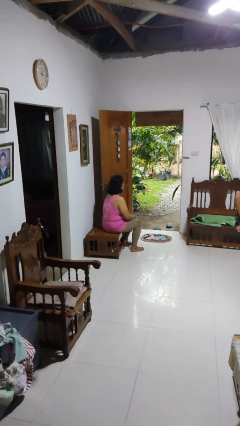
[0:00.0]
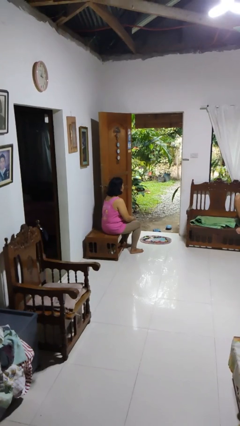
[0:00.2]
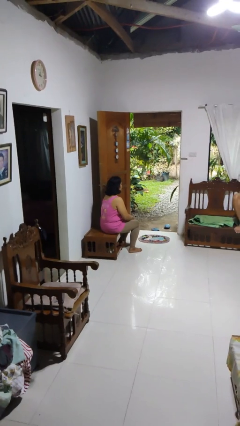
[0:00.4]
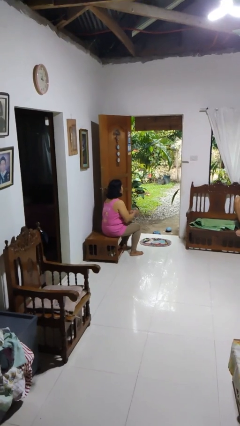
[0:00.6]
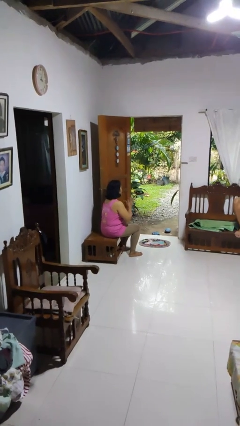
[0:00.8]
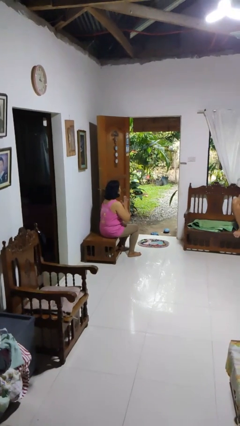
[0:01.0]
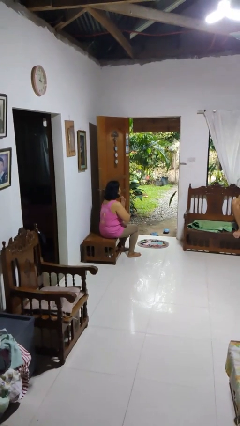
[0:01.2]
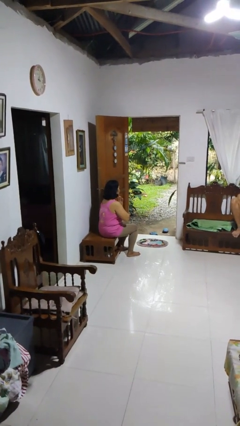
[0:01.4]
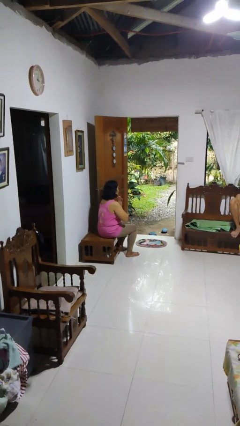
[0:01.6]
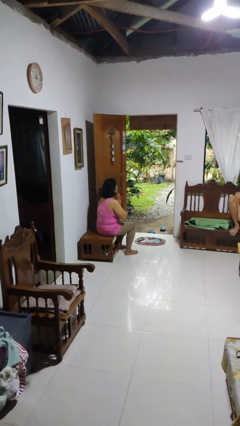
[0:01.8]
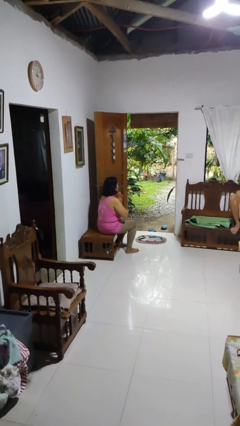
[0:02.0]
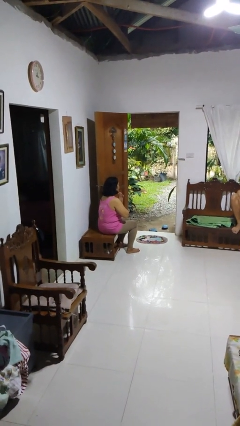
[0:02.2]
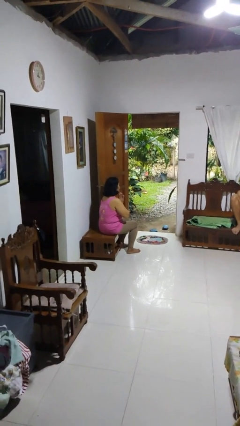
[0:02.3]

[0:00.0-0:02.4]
person prays

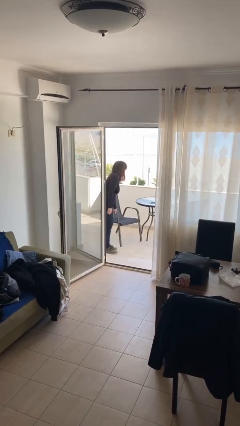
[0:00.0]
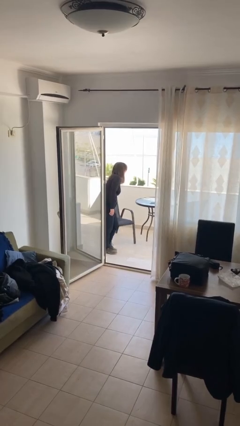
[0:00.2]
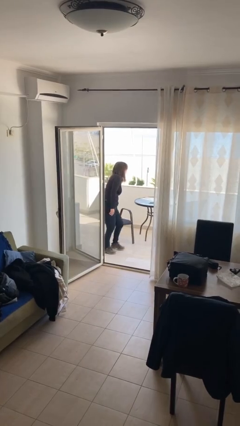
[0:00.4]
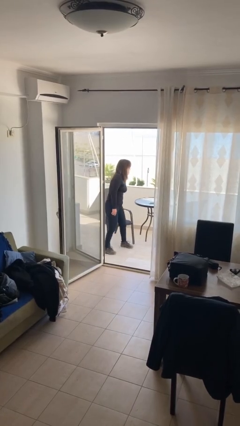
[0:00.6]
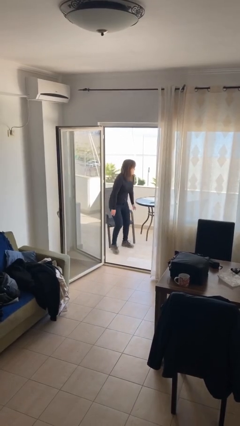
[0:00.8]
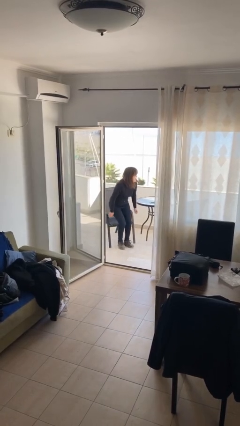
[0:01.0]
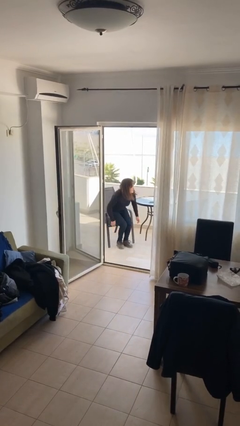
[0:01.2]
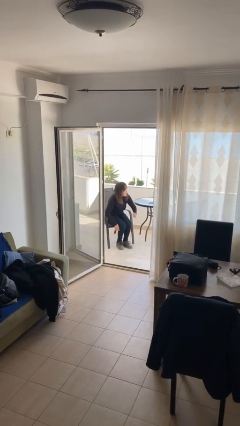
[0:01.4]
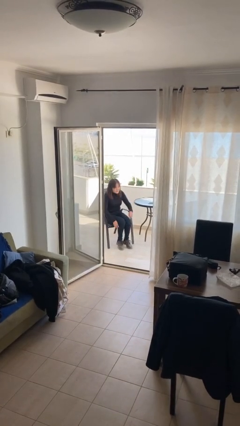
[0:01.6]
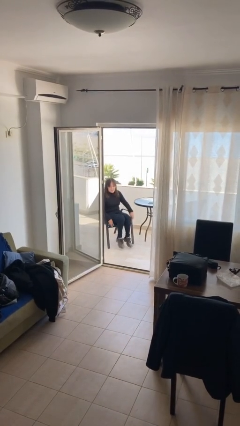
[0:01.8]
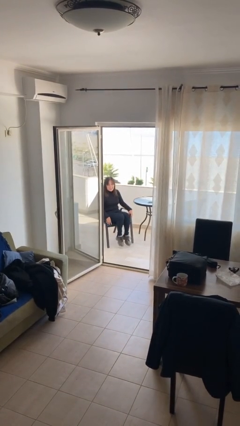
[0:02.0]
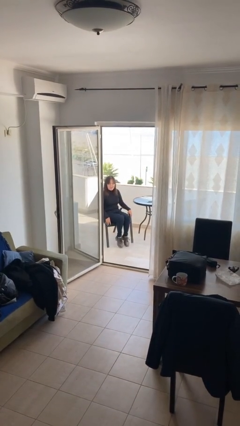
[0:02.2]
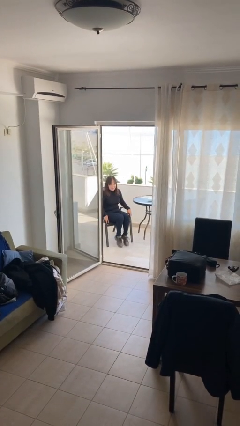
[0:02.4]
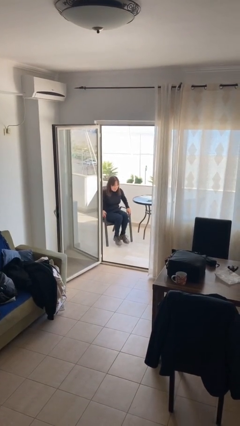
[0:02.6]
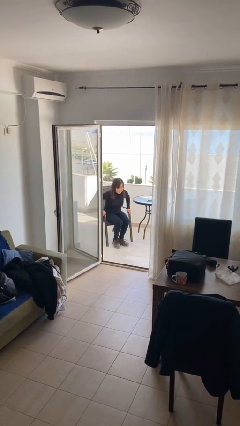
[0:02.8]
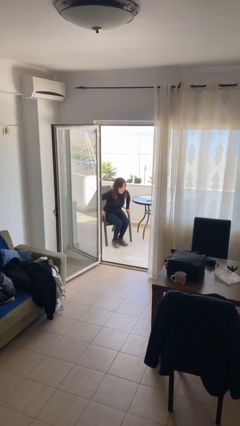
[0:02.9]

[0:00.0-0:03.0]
person sits down

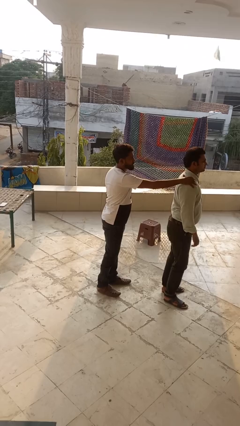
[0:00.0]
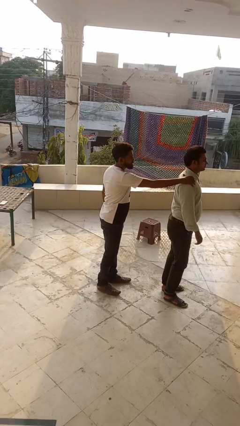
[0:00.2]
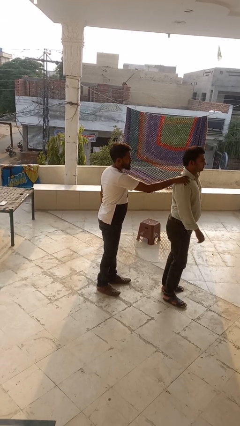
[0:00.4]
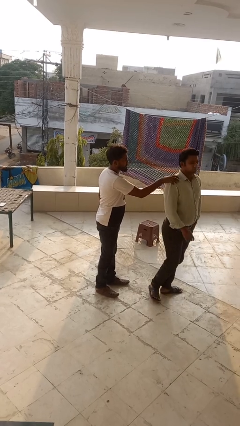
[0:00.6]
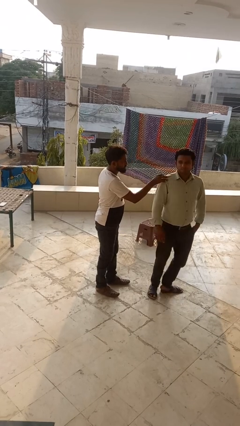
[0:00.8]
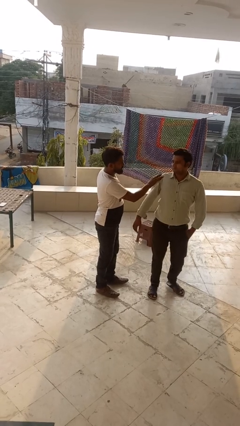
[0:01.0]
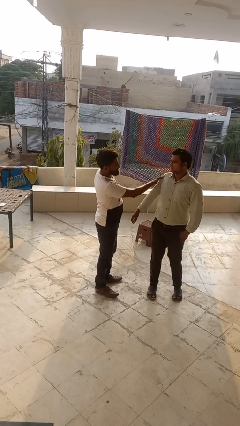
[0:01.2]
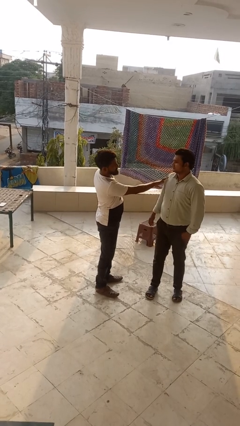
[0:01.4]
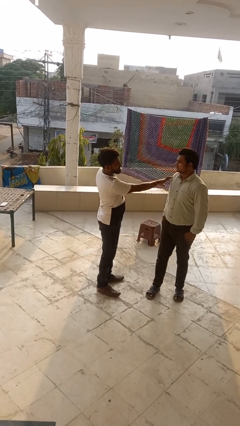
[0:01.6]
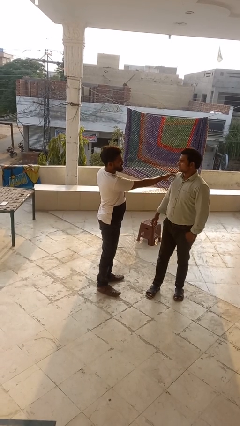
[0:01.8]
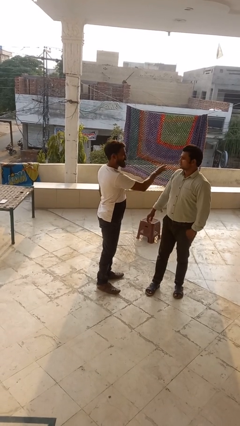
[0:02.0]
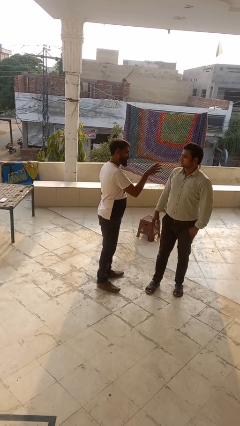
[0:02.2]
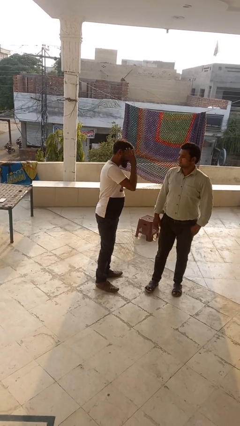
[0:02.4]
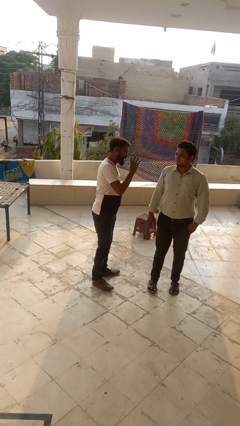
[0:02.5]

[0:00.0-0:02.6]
person spins person around

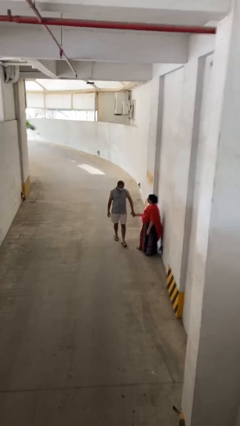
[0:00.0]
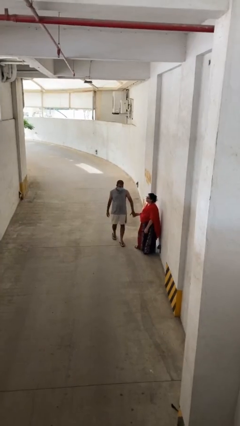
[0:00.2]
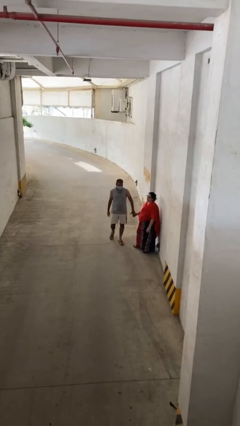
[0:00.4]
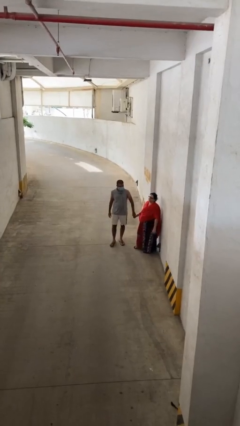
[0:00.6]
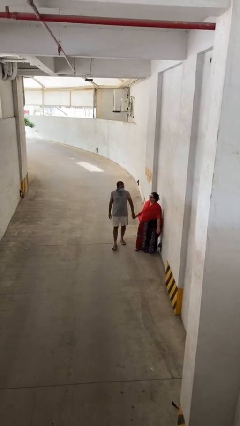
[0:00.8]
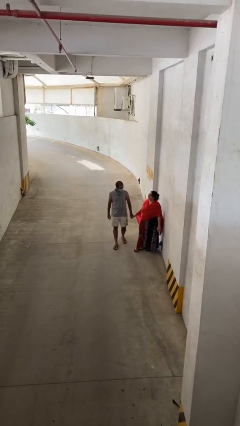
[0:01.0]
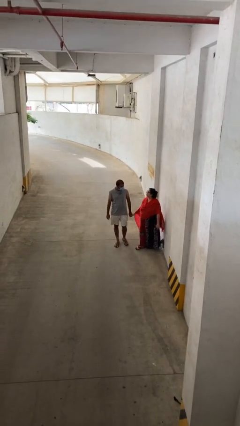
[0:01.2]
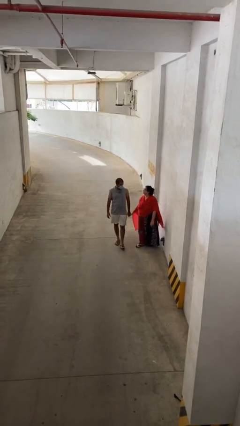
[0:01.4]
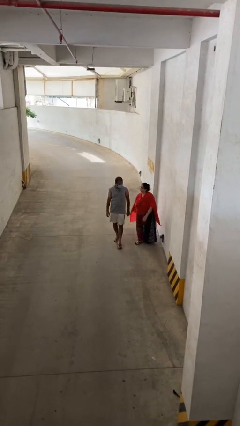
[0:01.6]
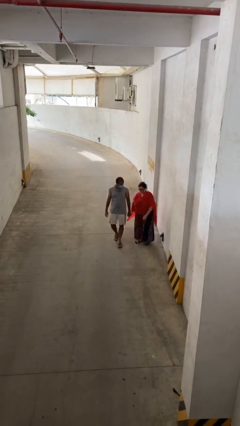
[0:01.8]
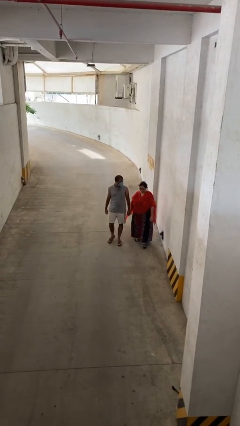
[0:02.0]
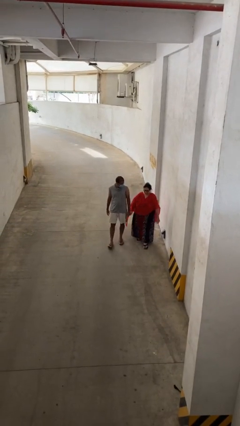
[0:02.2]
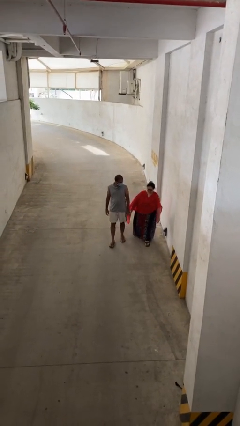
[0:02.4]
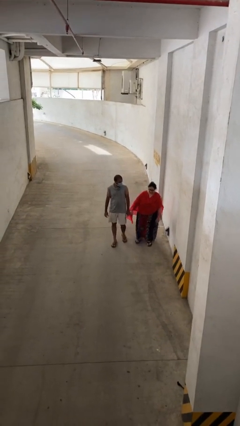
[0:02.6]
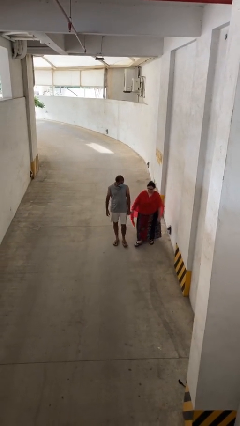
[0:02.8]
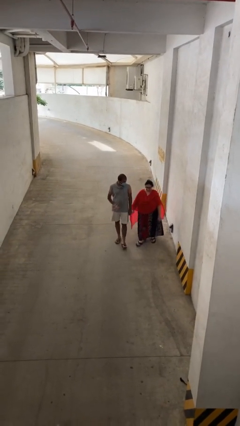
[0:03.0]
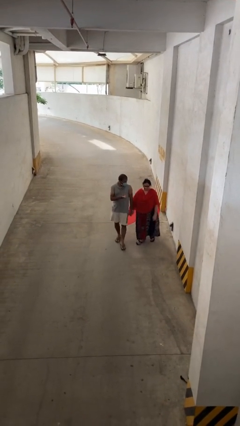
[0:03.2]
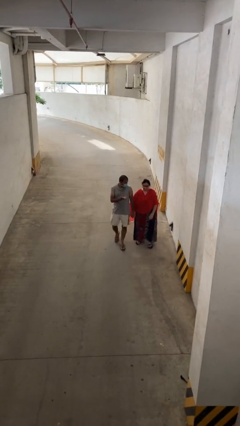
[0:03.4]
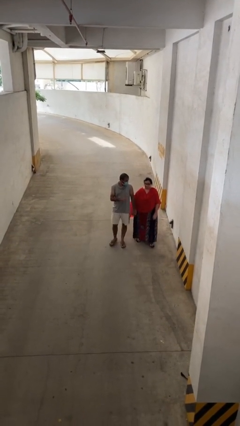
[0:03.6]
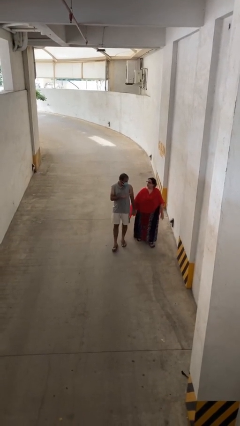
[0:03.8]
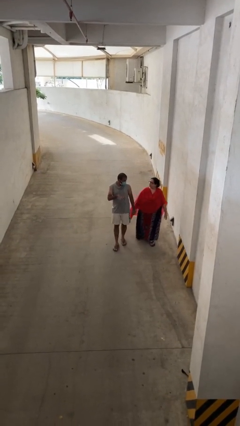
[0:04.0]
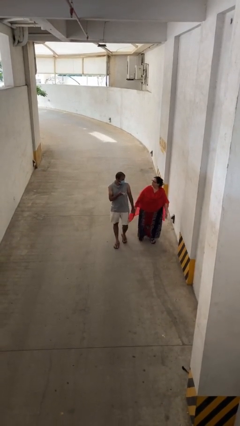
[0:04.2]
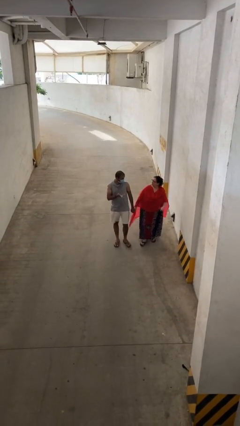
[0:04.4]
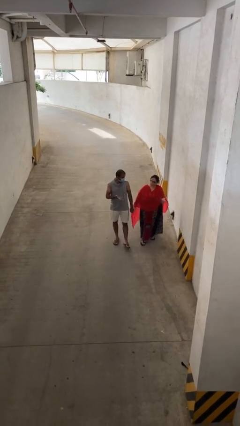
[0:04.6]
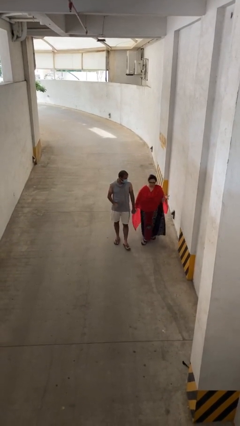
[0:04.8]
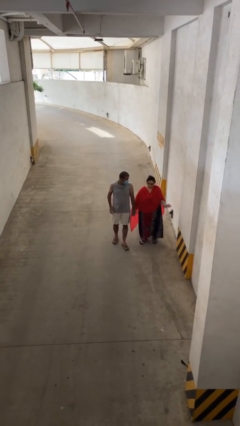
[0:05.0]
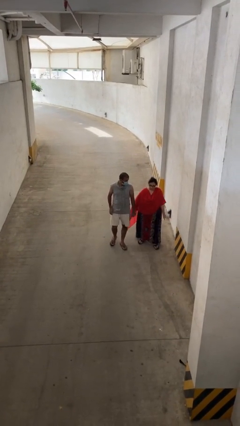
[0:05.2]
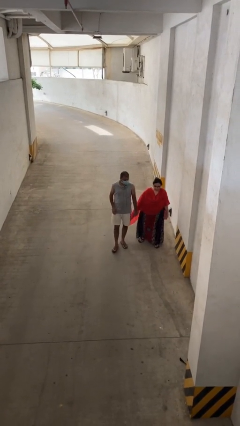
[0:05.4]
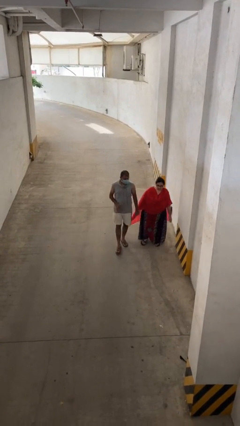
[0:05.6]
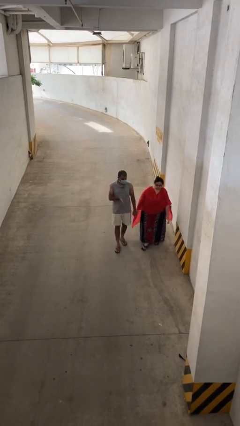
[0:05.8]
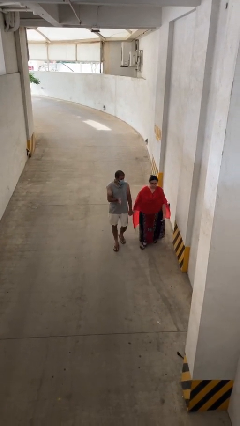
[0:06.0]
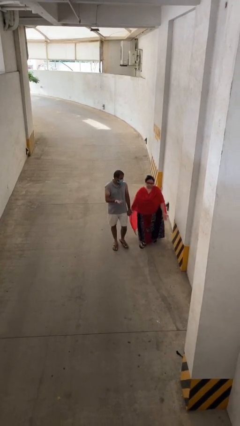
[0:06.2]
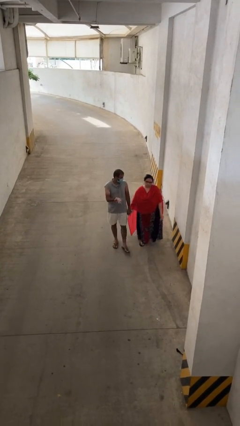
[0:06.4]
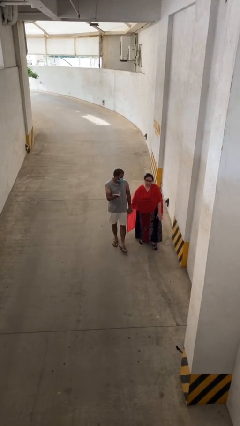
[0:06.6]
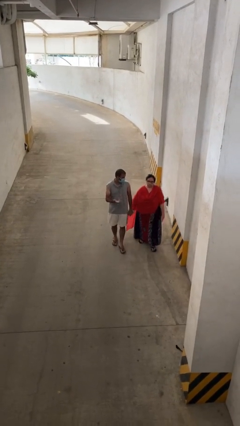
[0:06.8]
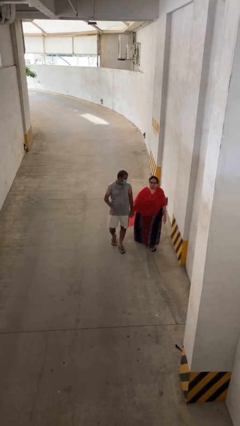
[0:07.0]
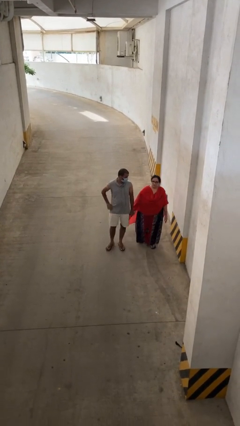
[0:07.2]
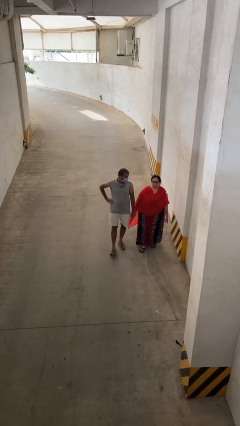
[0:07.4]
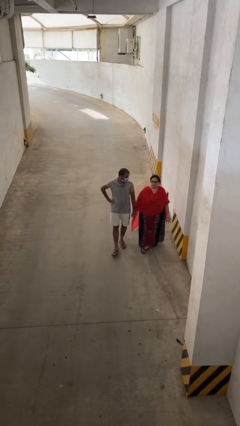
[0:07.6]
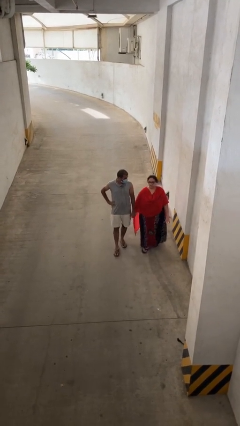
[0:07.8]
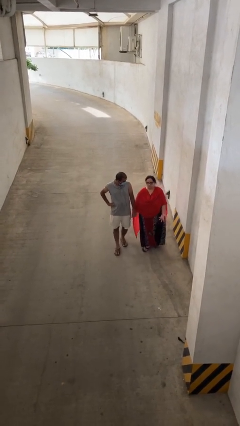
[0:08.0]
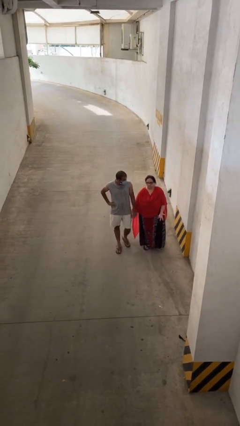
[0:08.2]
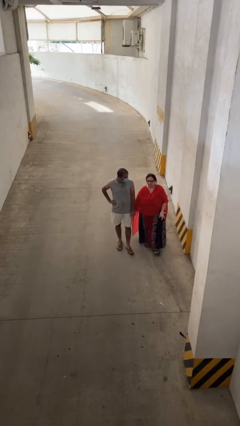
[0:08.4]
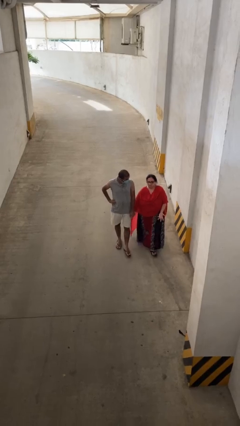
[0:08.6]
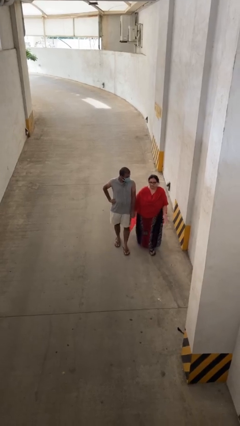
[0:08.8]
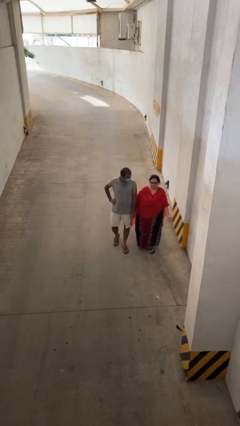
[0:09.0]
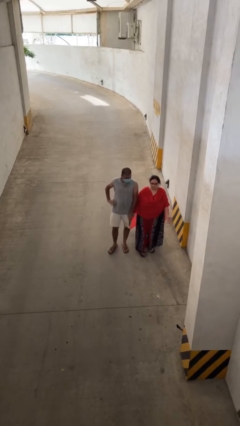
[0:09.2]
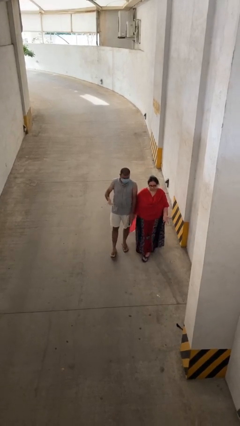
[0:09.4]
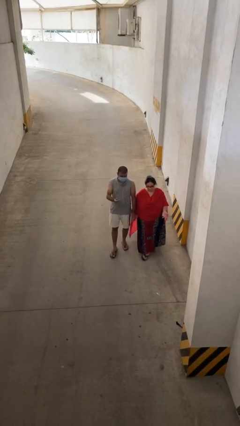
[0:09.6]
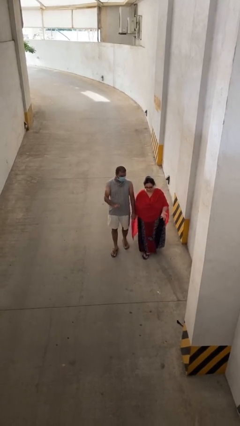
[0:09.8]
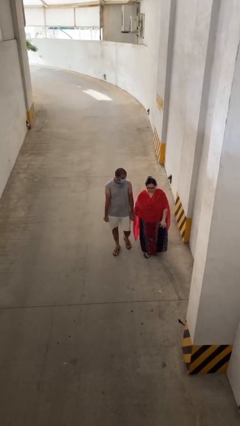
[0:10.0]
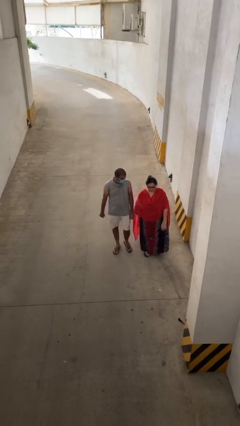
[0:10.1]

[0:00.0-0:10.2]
person holds hand
